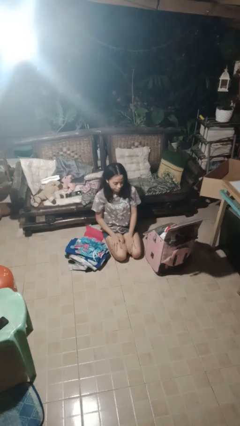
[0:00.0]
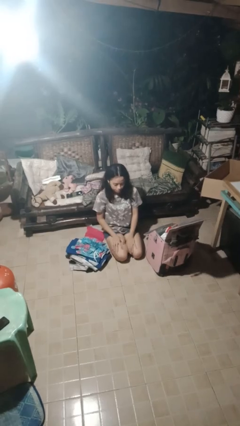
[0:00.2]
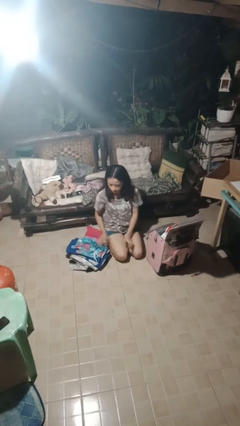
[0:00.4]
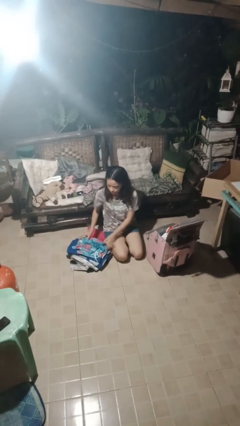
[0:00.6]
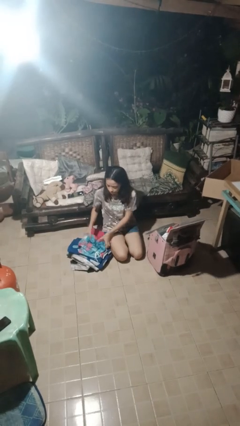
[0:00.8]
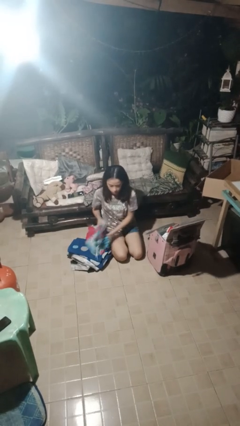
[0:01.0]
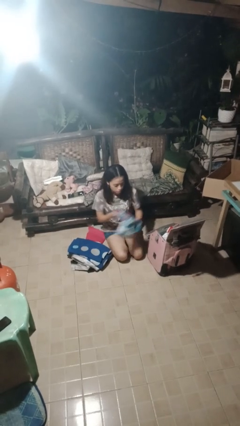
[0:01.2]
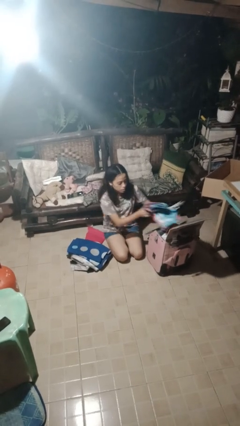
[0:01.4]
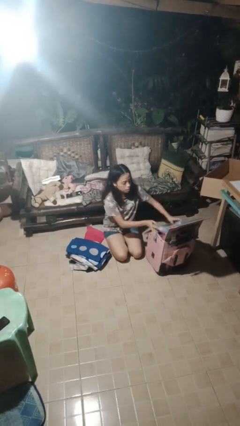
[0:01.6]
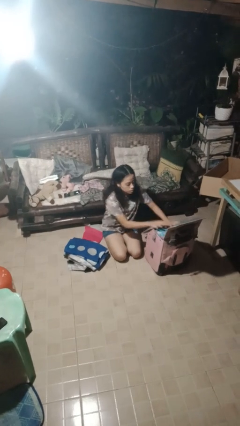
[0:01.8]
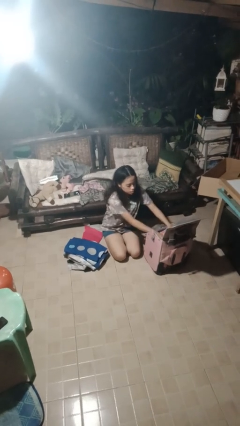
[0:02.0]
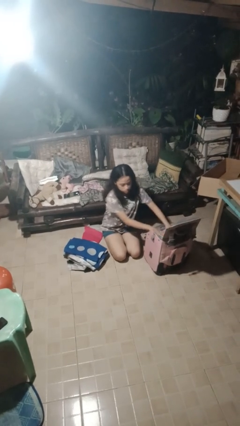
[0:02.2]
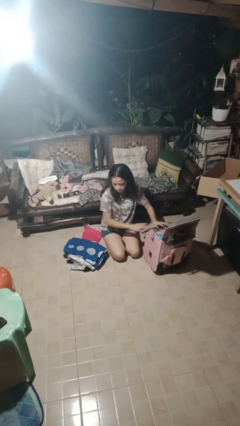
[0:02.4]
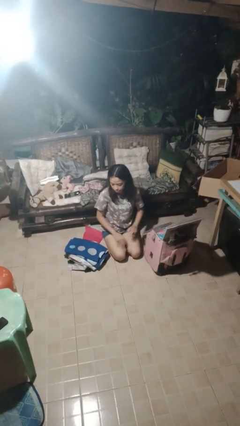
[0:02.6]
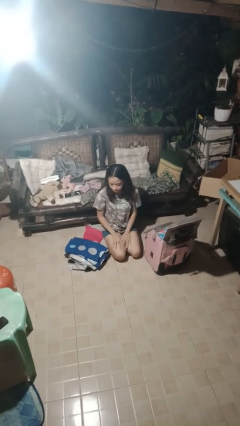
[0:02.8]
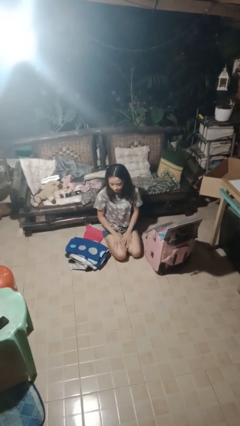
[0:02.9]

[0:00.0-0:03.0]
person loads clothes into suitcase

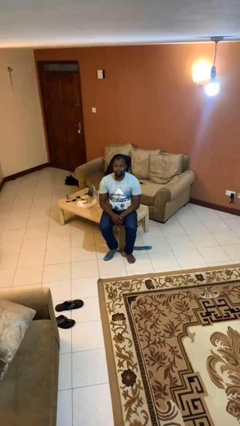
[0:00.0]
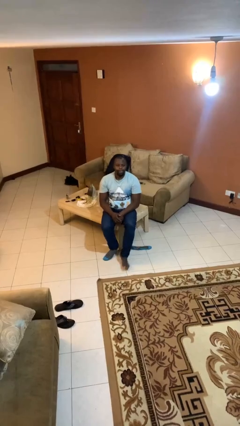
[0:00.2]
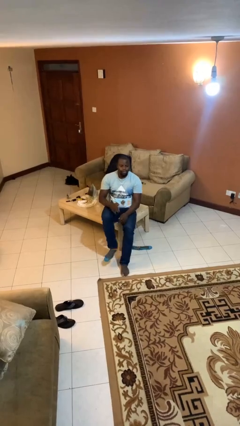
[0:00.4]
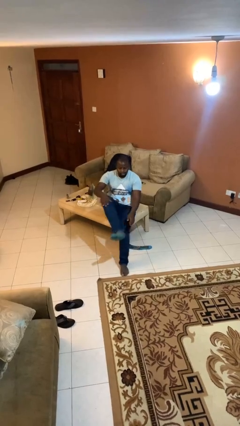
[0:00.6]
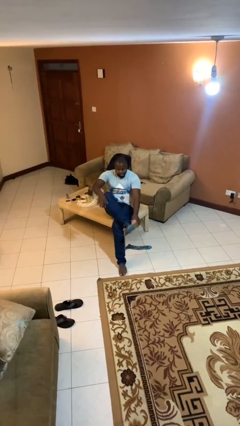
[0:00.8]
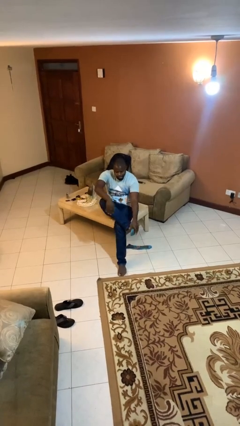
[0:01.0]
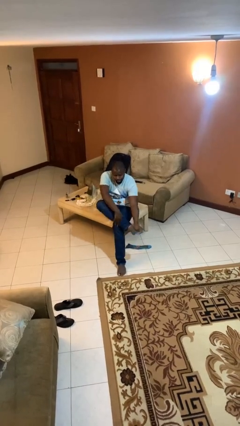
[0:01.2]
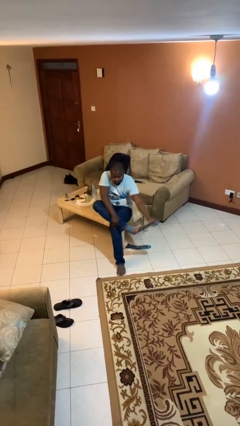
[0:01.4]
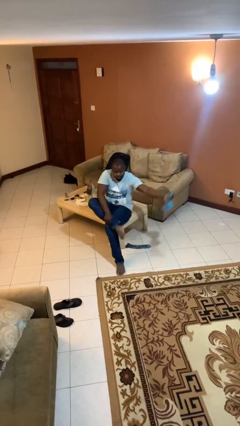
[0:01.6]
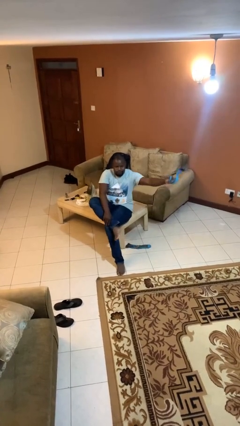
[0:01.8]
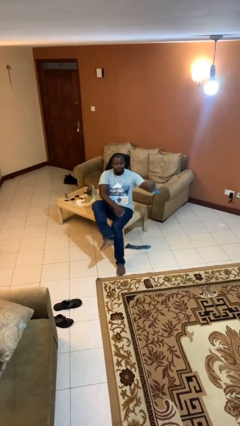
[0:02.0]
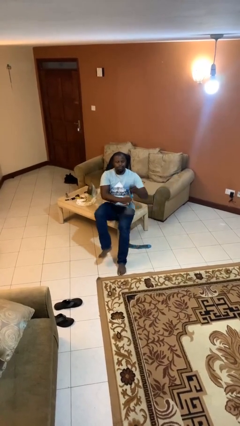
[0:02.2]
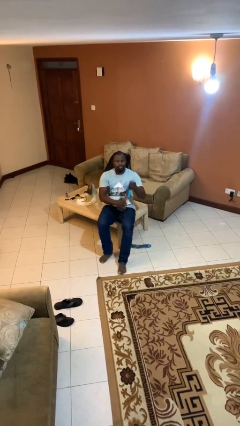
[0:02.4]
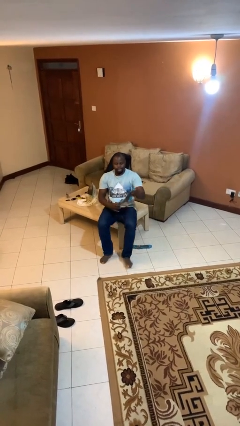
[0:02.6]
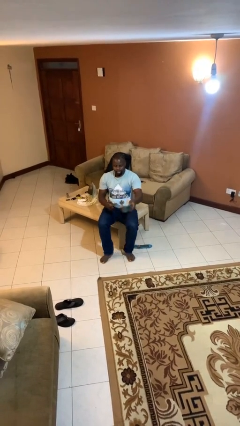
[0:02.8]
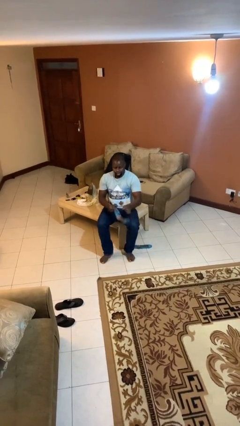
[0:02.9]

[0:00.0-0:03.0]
person takes off socks

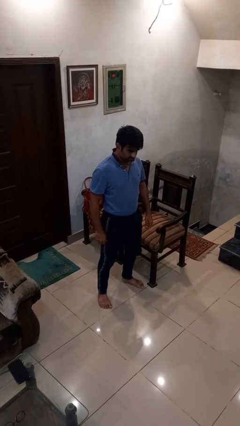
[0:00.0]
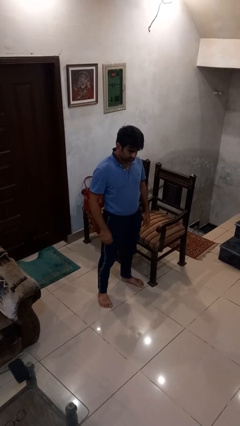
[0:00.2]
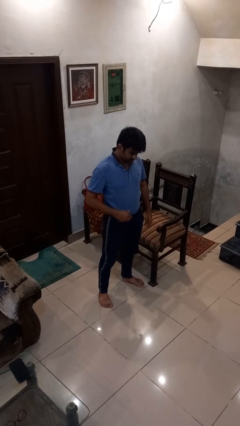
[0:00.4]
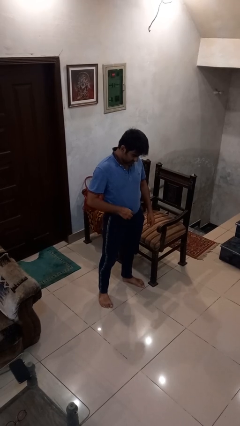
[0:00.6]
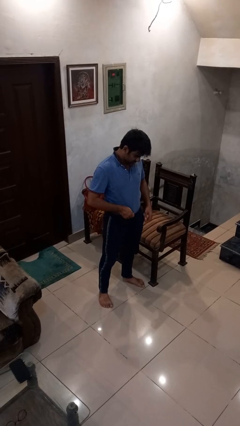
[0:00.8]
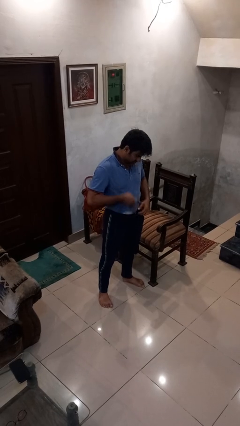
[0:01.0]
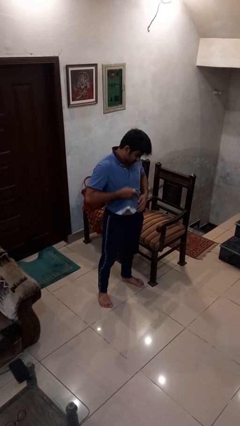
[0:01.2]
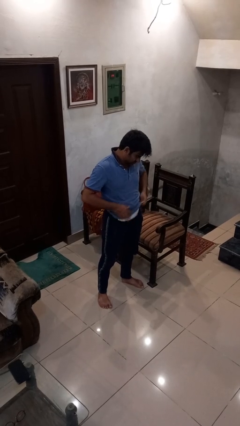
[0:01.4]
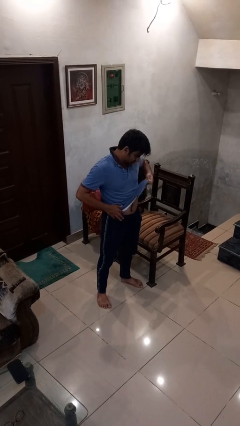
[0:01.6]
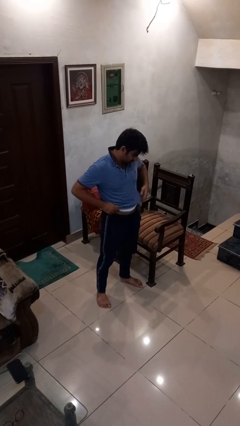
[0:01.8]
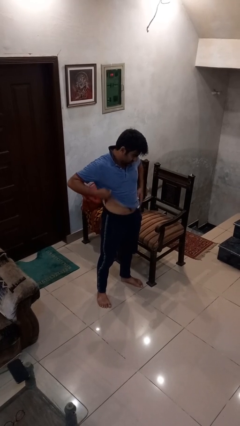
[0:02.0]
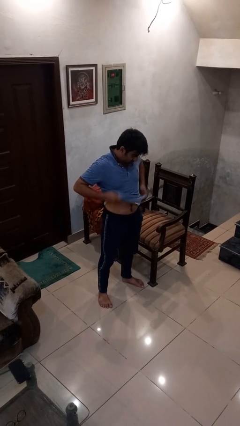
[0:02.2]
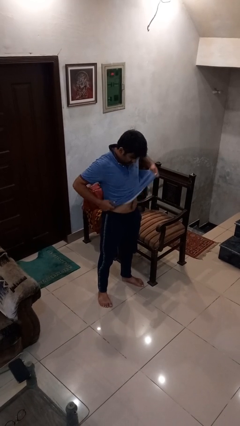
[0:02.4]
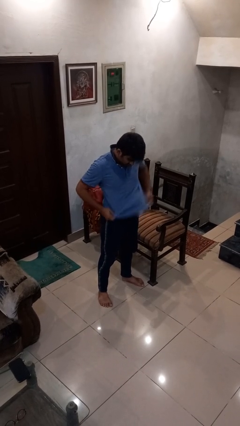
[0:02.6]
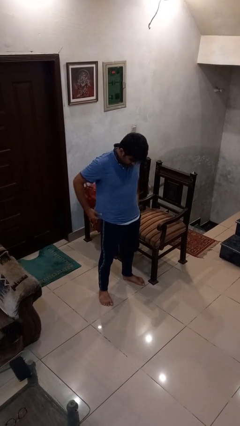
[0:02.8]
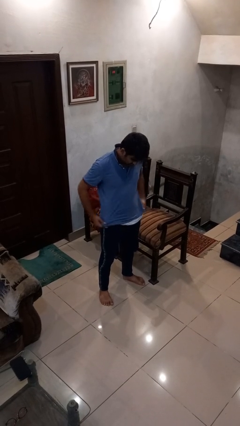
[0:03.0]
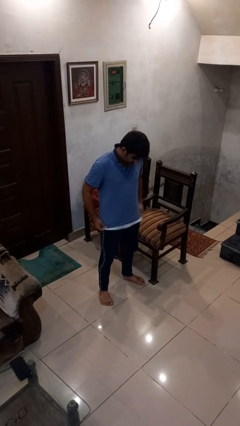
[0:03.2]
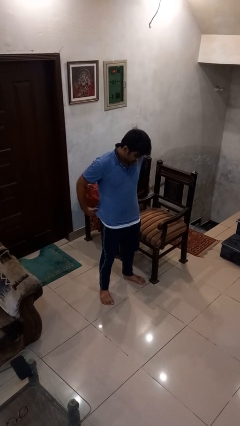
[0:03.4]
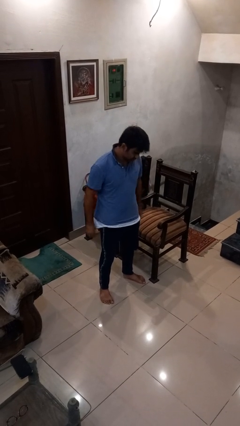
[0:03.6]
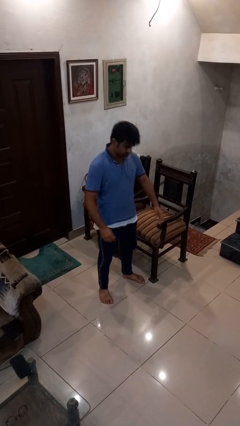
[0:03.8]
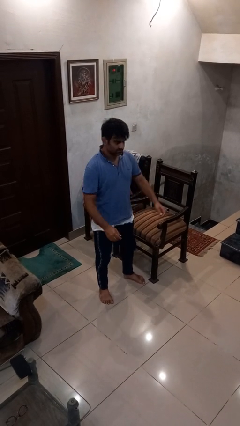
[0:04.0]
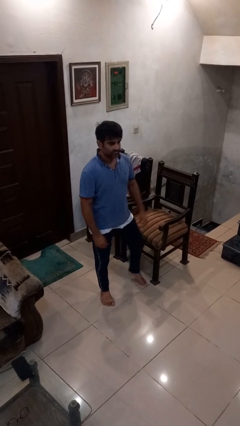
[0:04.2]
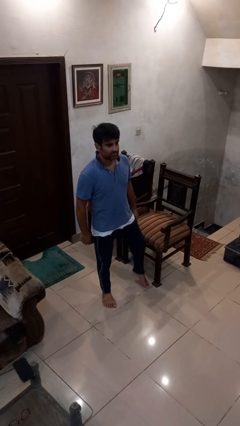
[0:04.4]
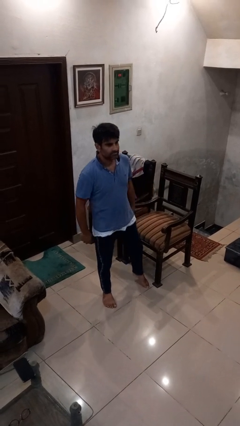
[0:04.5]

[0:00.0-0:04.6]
person untucks shirt

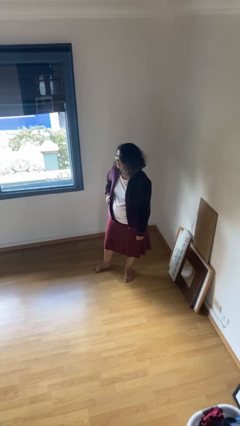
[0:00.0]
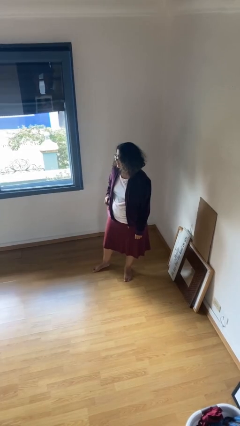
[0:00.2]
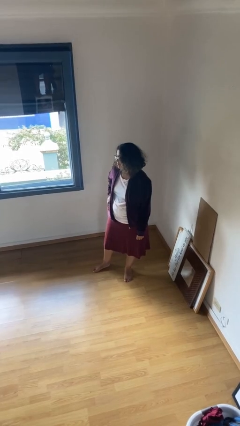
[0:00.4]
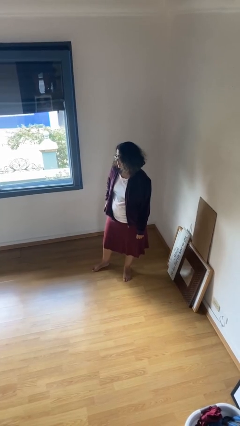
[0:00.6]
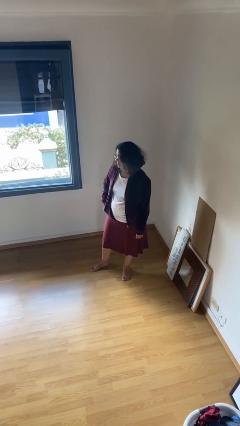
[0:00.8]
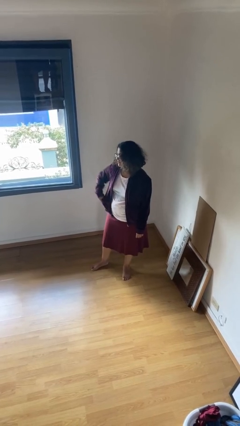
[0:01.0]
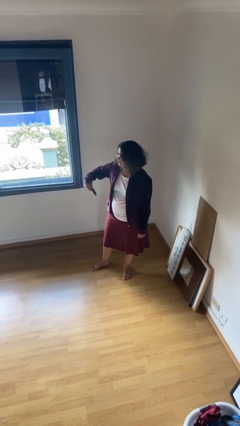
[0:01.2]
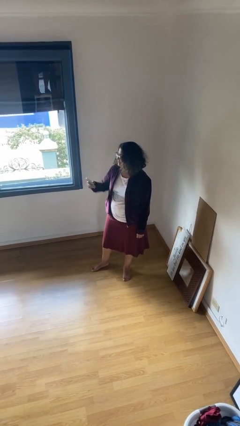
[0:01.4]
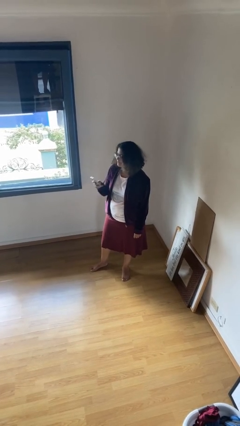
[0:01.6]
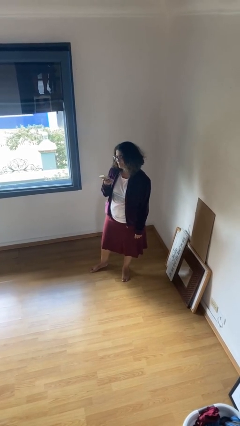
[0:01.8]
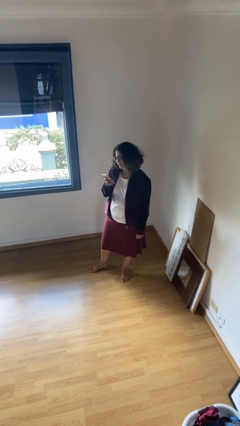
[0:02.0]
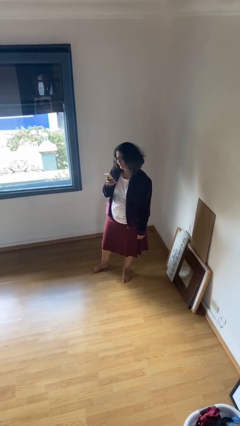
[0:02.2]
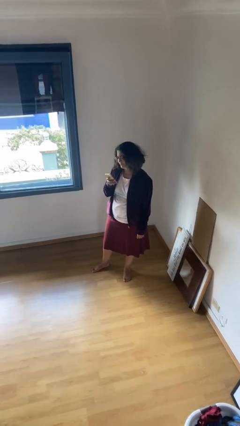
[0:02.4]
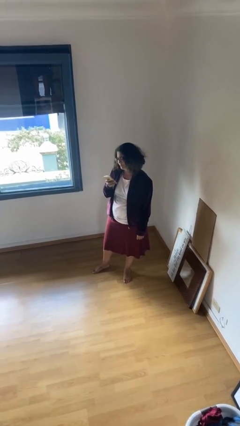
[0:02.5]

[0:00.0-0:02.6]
person takes phone from pocket

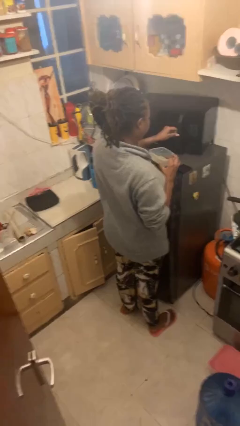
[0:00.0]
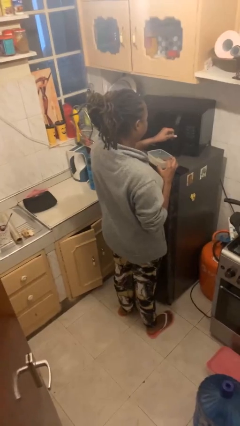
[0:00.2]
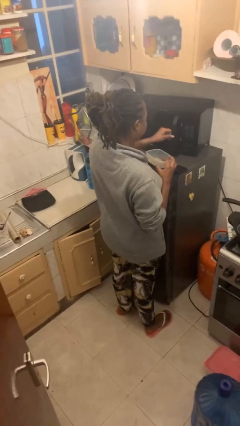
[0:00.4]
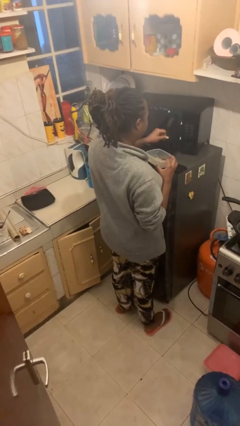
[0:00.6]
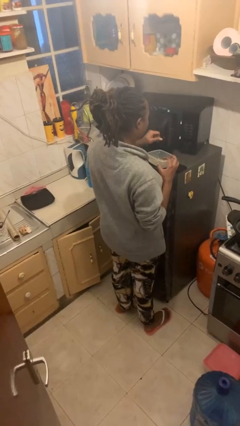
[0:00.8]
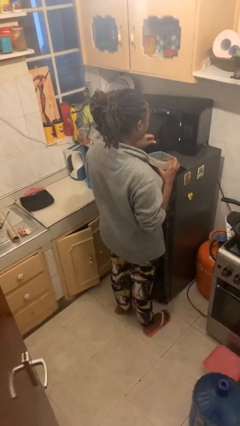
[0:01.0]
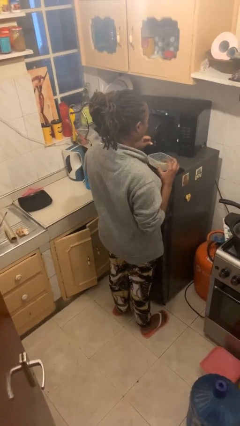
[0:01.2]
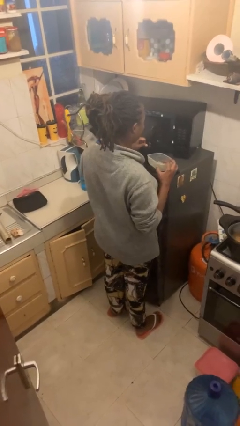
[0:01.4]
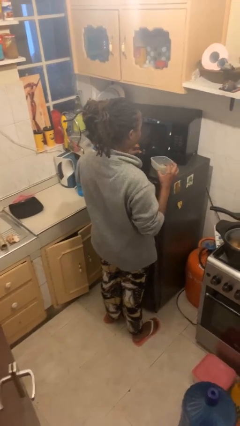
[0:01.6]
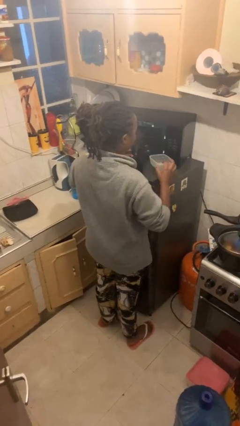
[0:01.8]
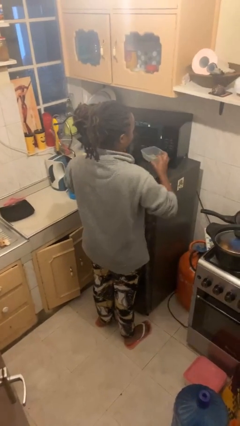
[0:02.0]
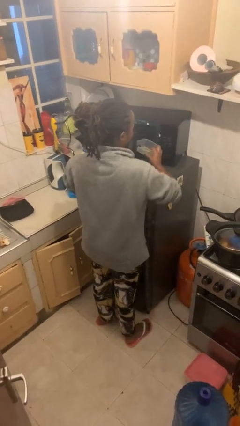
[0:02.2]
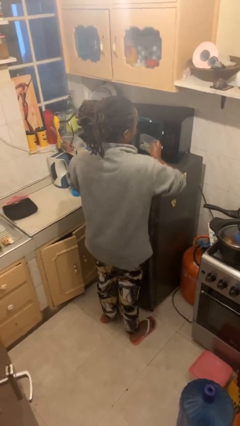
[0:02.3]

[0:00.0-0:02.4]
person opens microwave

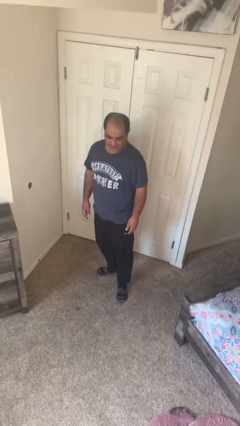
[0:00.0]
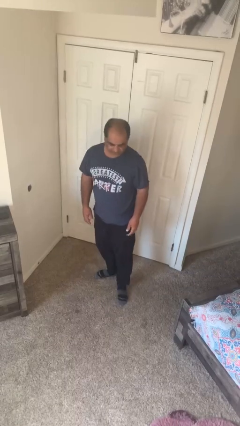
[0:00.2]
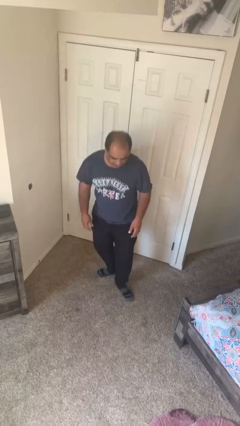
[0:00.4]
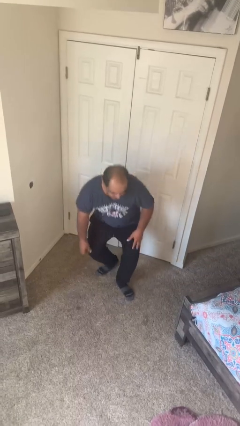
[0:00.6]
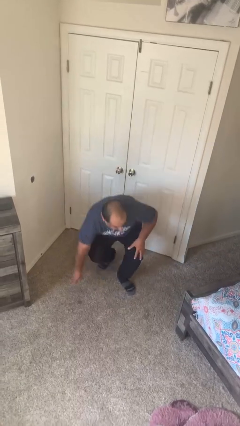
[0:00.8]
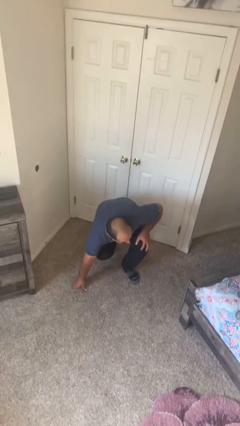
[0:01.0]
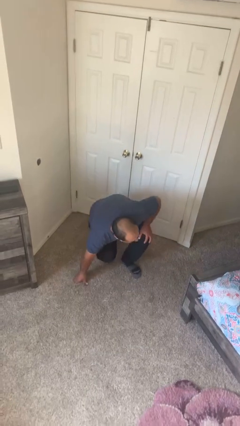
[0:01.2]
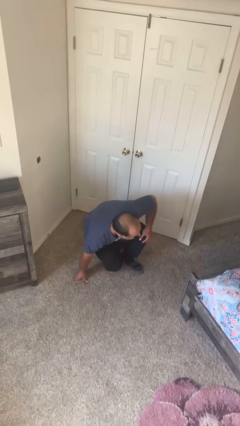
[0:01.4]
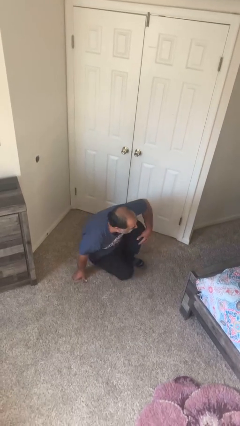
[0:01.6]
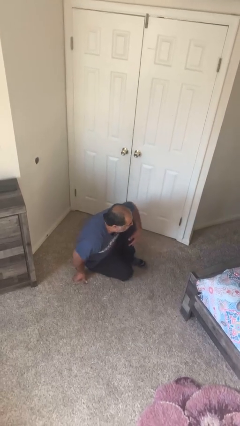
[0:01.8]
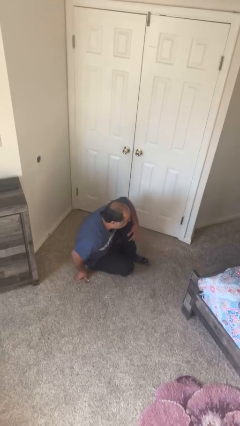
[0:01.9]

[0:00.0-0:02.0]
person sits down

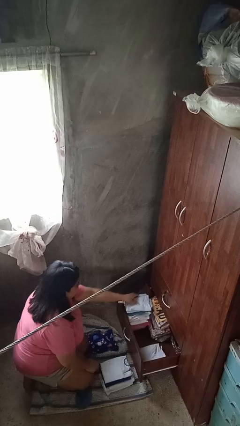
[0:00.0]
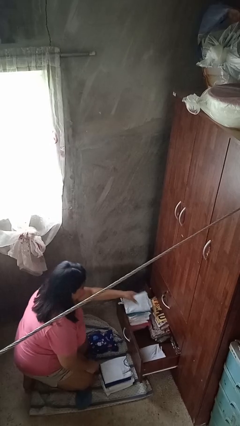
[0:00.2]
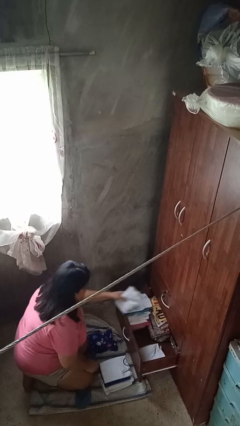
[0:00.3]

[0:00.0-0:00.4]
person takes clothes from dresser
